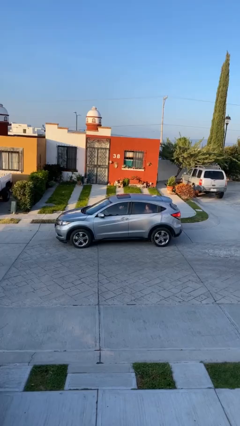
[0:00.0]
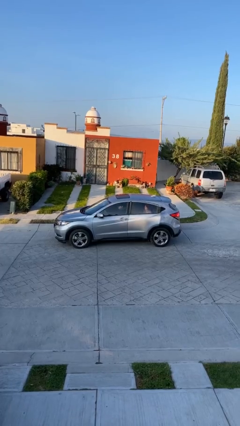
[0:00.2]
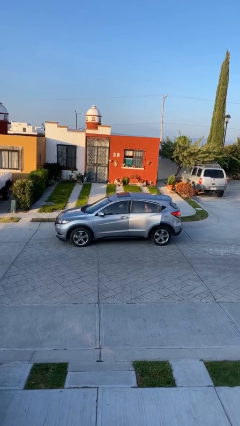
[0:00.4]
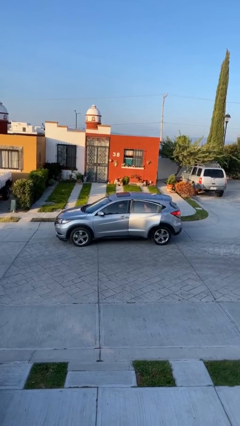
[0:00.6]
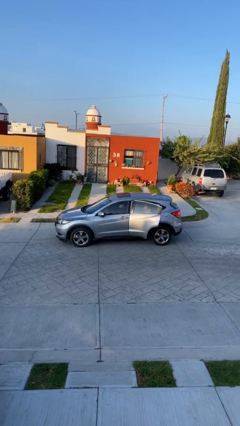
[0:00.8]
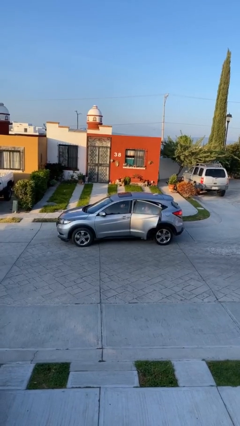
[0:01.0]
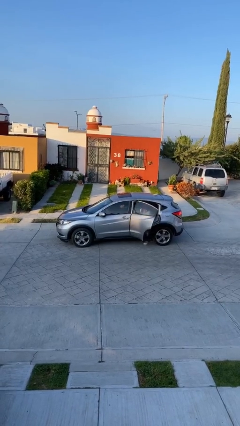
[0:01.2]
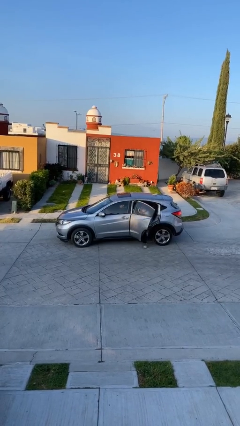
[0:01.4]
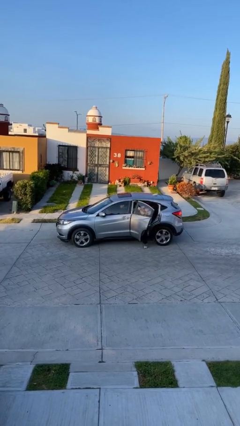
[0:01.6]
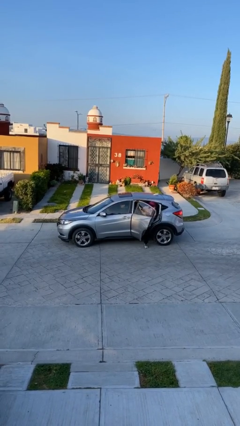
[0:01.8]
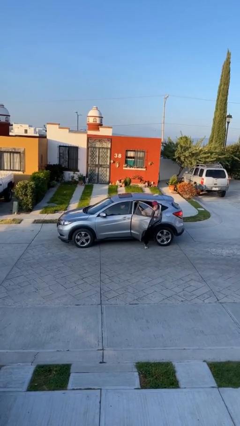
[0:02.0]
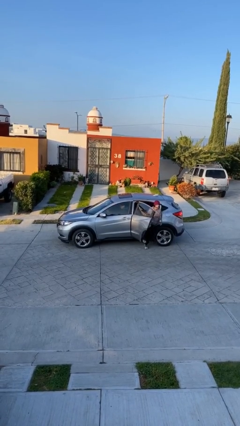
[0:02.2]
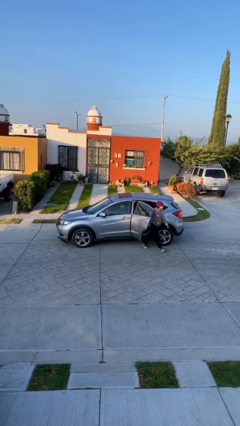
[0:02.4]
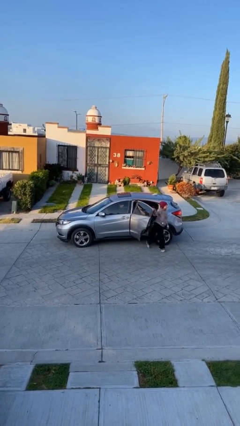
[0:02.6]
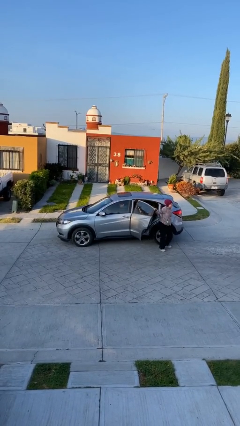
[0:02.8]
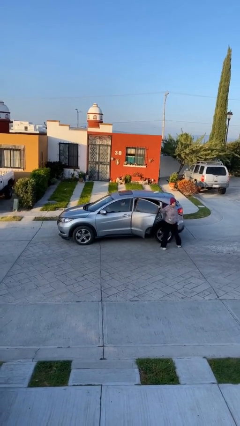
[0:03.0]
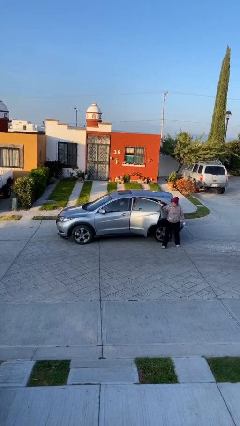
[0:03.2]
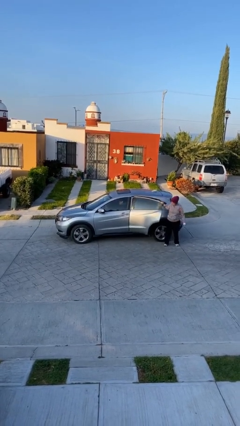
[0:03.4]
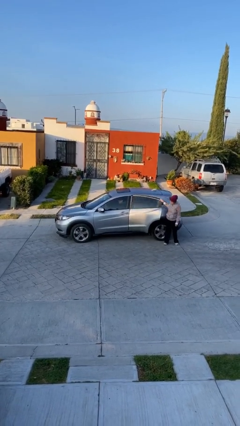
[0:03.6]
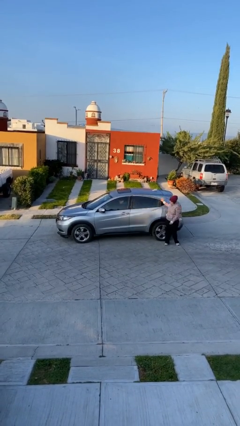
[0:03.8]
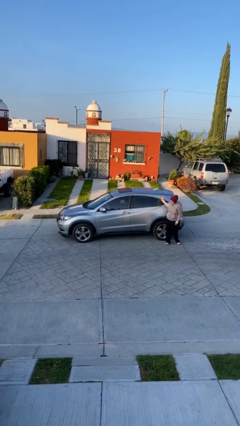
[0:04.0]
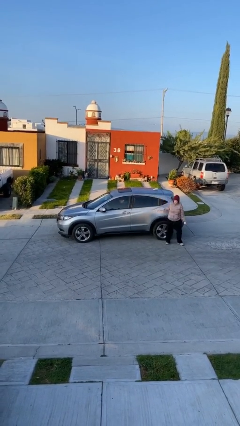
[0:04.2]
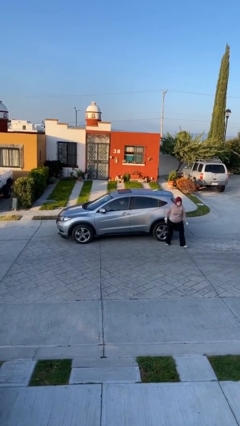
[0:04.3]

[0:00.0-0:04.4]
car drops off person

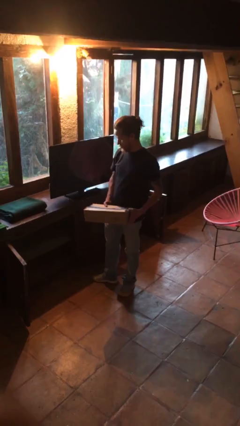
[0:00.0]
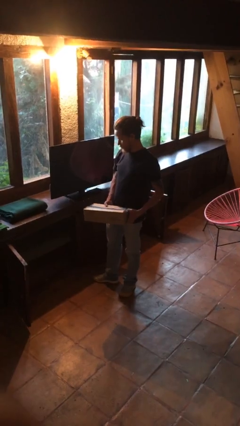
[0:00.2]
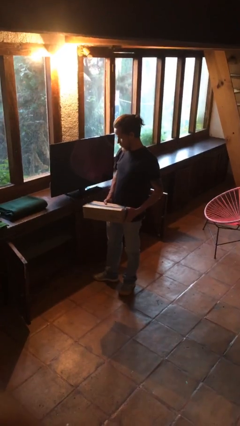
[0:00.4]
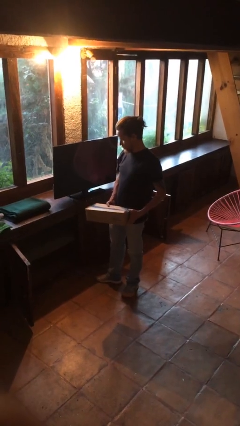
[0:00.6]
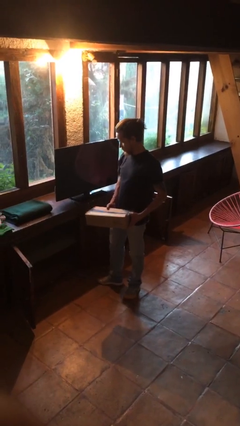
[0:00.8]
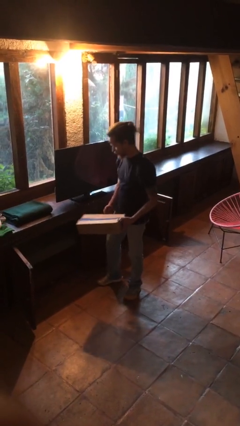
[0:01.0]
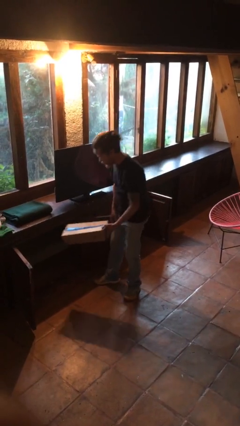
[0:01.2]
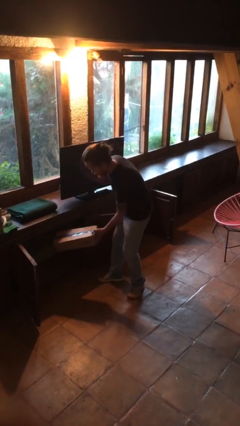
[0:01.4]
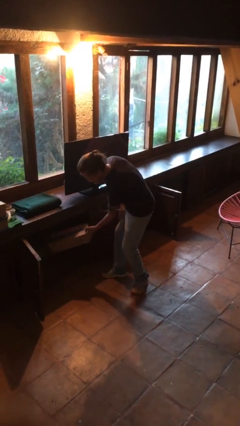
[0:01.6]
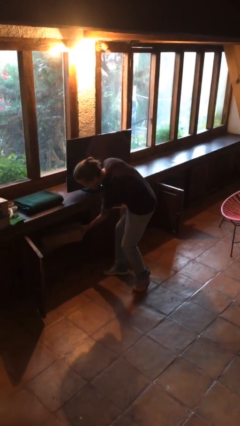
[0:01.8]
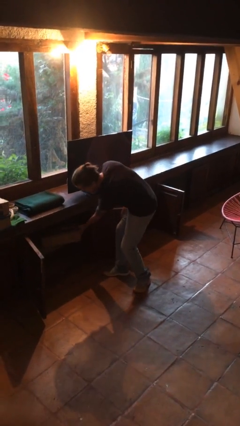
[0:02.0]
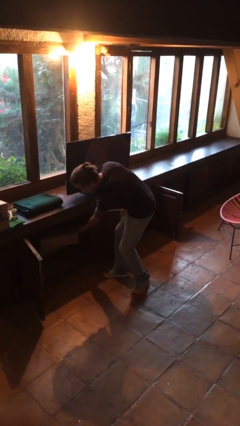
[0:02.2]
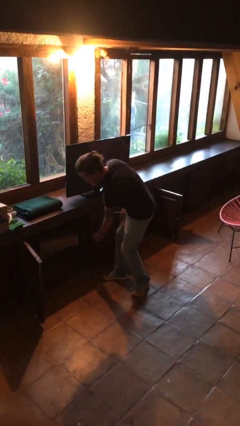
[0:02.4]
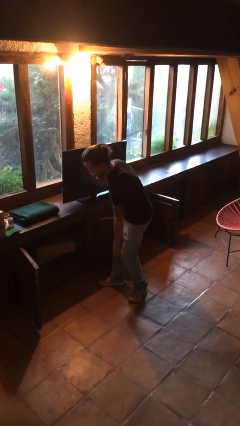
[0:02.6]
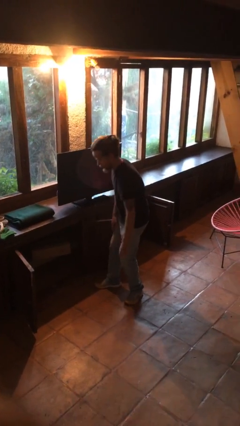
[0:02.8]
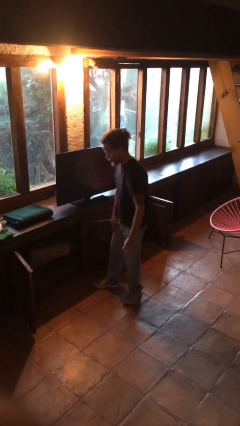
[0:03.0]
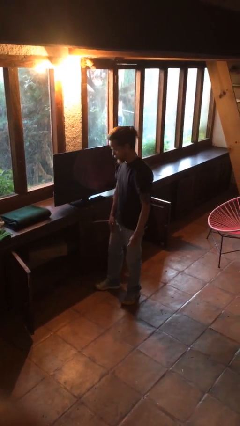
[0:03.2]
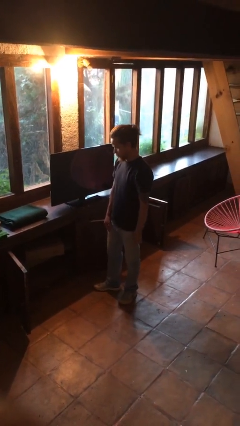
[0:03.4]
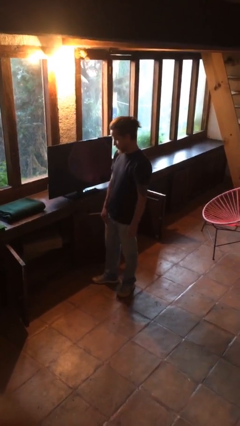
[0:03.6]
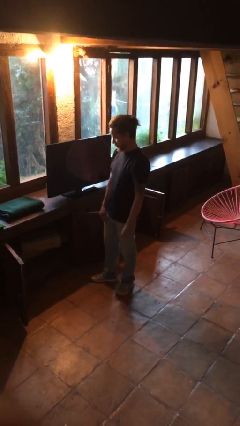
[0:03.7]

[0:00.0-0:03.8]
person puts down object into cabinet

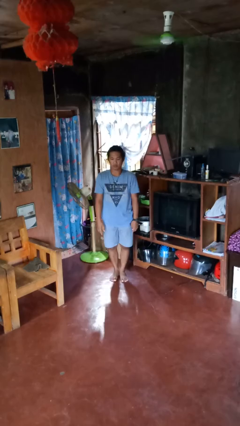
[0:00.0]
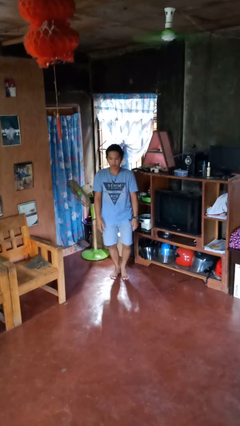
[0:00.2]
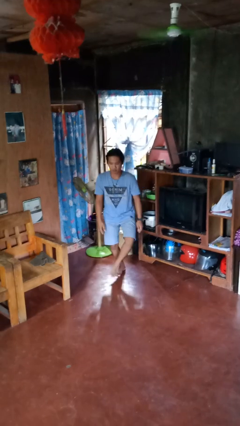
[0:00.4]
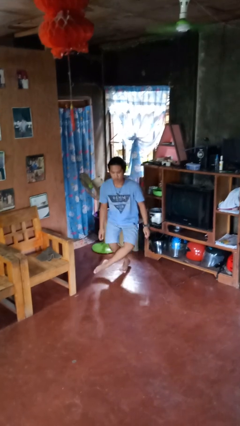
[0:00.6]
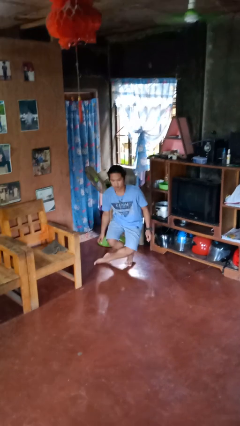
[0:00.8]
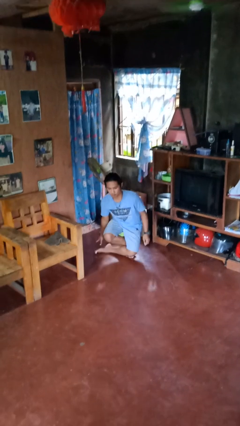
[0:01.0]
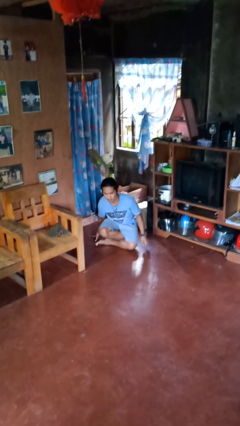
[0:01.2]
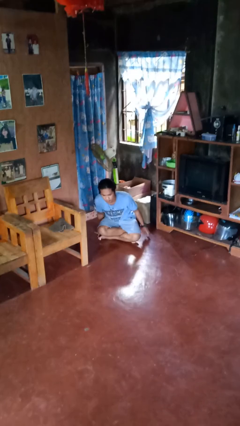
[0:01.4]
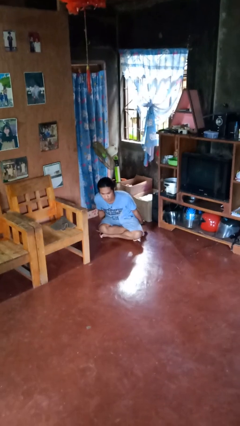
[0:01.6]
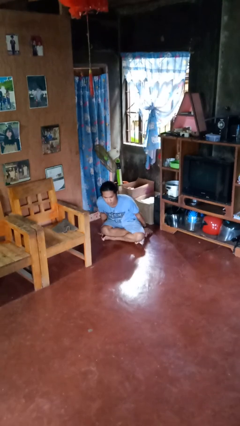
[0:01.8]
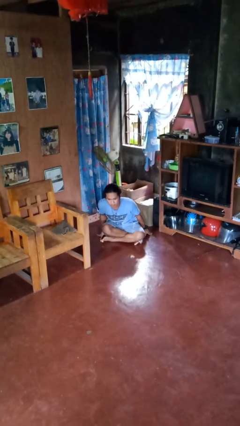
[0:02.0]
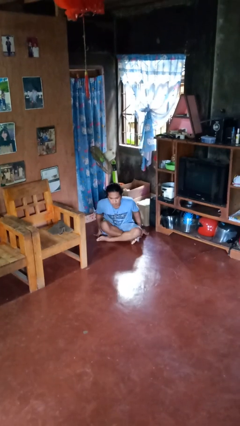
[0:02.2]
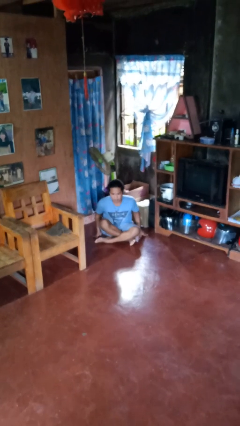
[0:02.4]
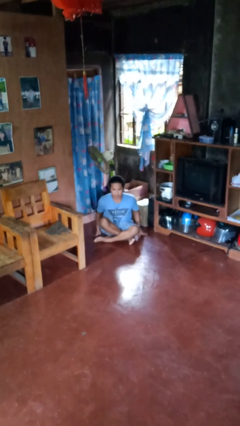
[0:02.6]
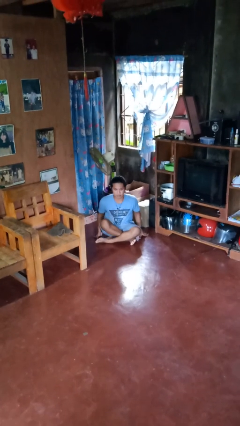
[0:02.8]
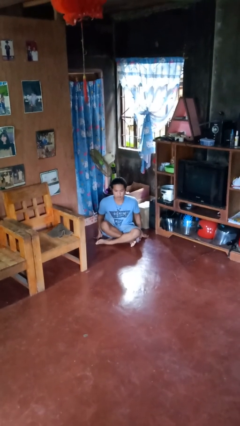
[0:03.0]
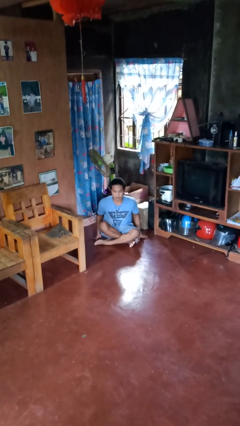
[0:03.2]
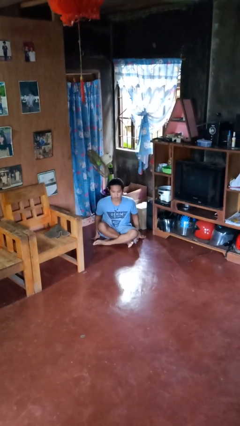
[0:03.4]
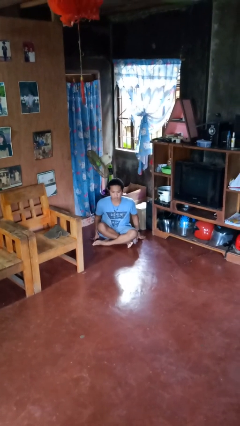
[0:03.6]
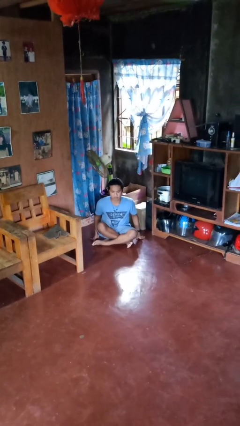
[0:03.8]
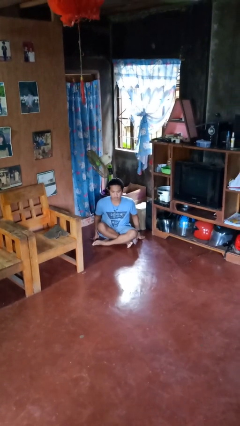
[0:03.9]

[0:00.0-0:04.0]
person sits crisscross

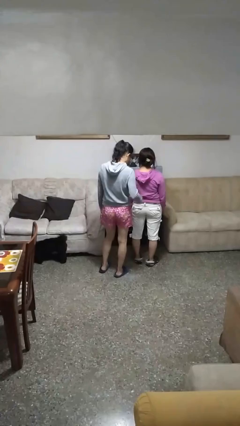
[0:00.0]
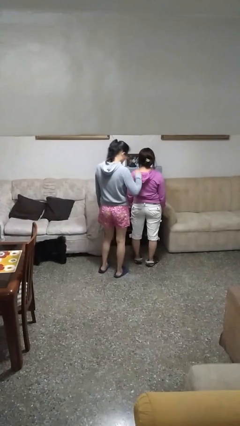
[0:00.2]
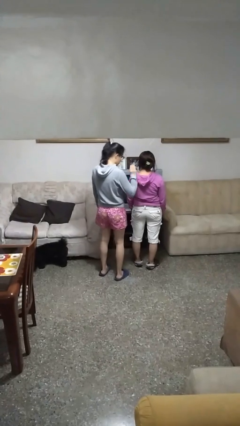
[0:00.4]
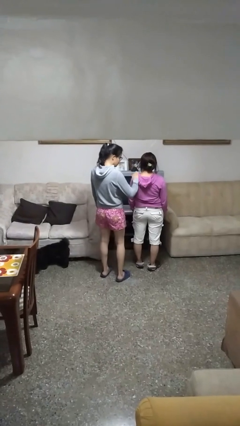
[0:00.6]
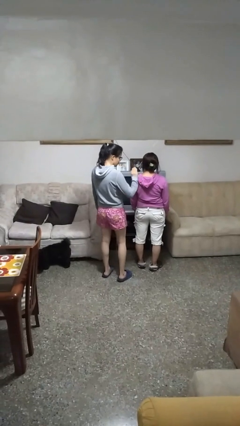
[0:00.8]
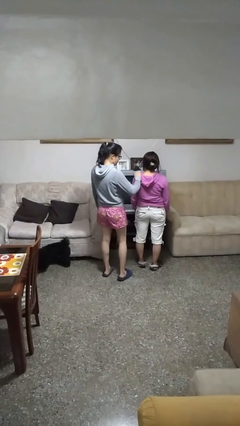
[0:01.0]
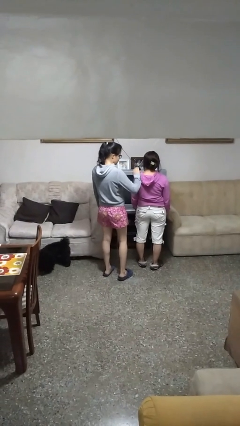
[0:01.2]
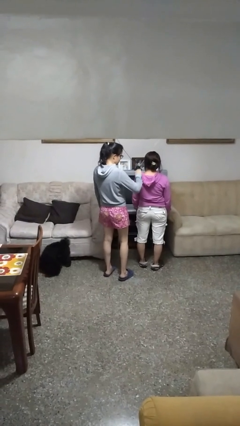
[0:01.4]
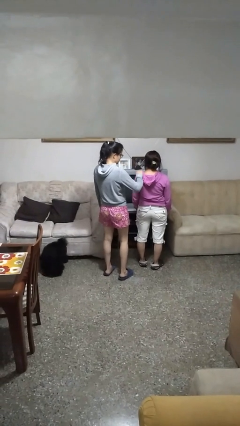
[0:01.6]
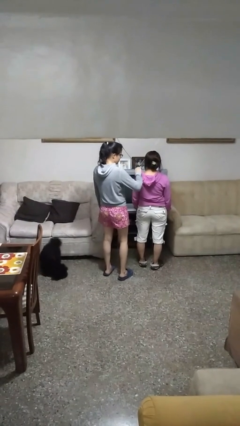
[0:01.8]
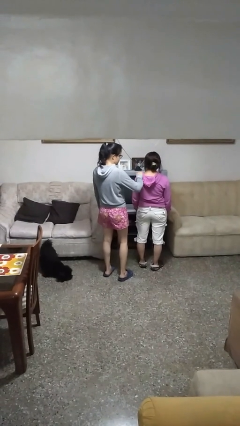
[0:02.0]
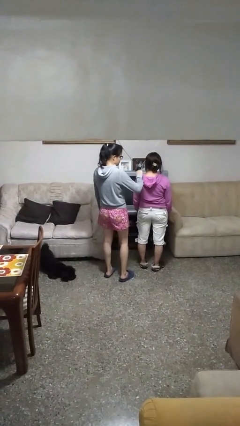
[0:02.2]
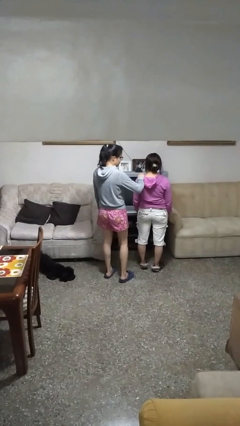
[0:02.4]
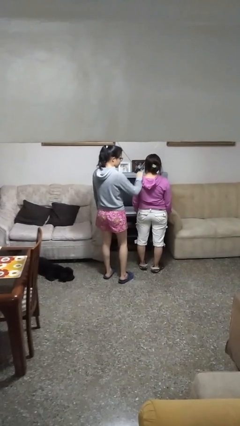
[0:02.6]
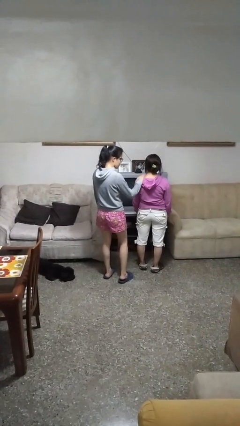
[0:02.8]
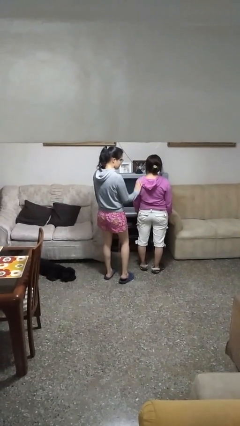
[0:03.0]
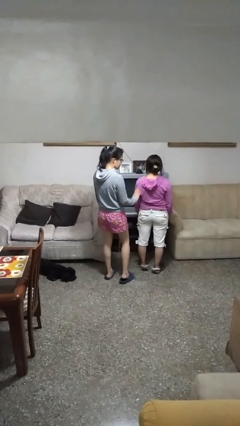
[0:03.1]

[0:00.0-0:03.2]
person touches back of person

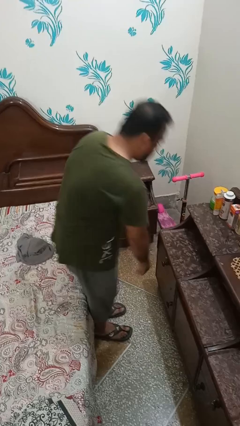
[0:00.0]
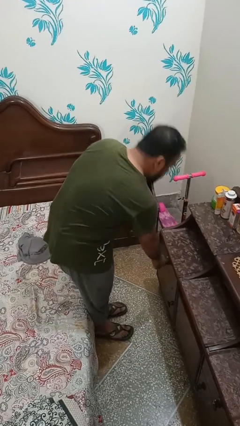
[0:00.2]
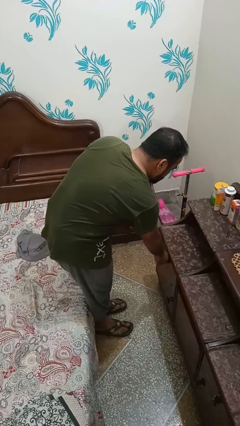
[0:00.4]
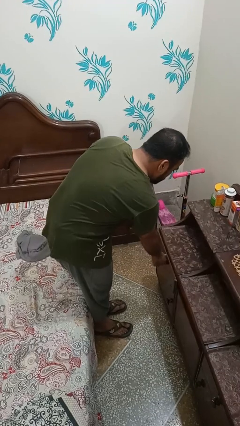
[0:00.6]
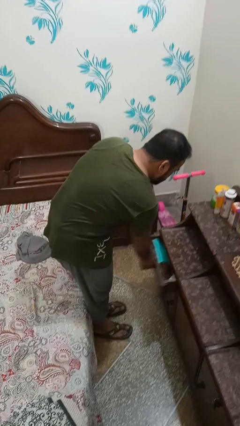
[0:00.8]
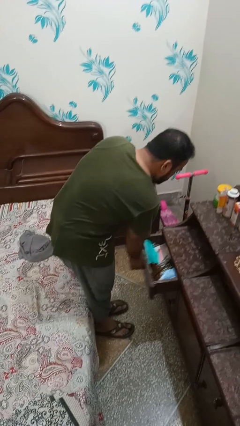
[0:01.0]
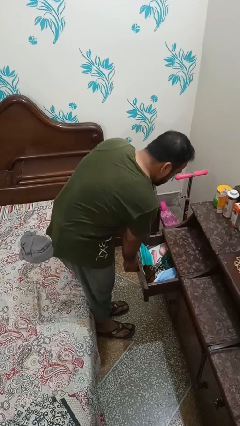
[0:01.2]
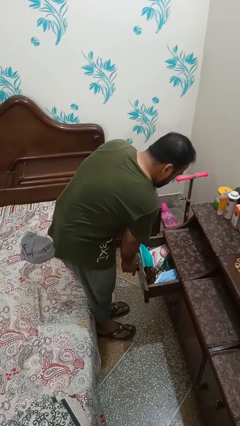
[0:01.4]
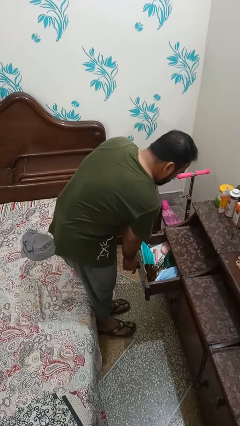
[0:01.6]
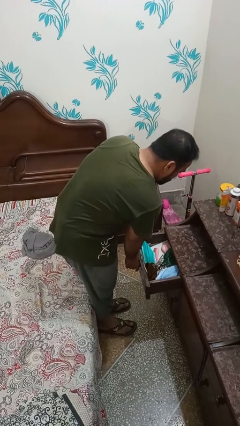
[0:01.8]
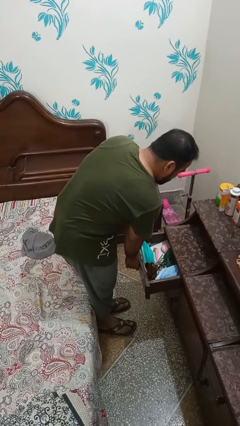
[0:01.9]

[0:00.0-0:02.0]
person opens dresser drawer

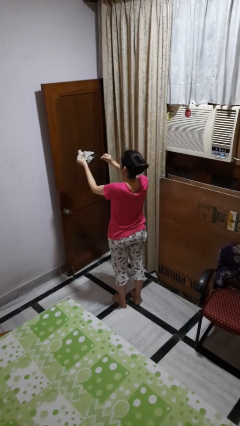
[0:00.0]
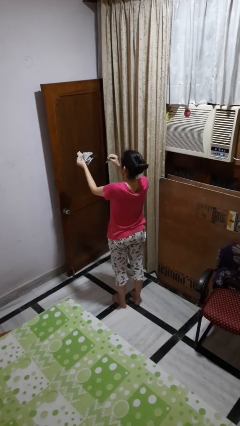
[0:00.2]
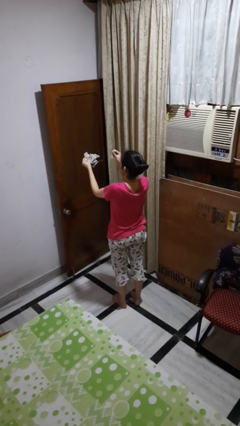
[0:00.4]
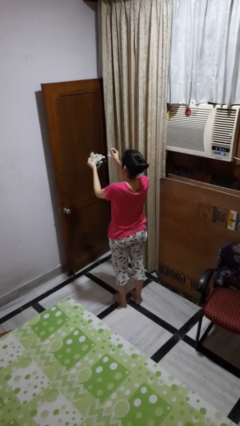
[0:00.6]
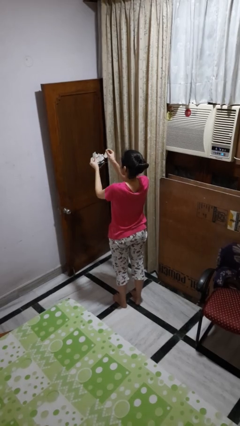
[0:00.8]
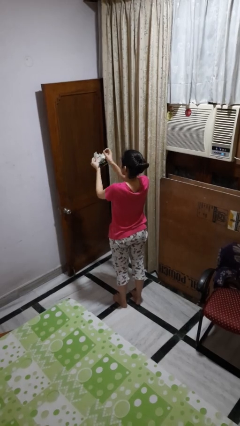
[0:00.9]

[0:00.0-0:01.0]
person tears paper
